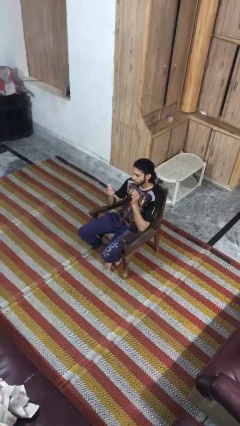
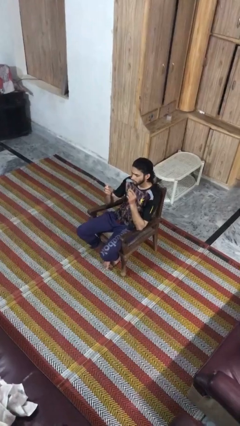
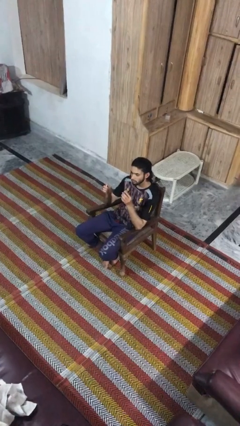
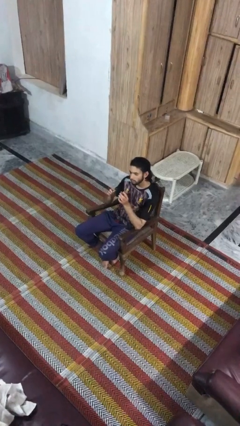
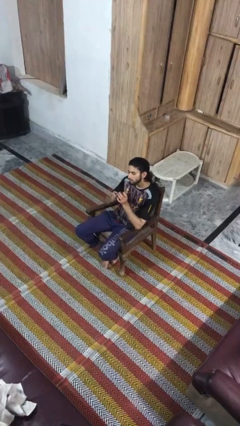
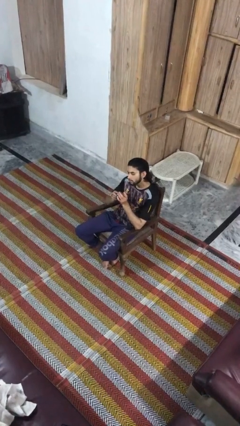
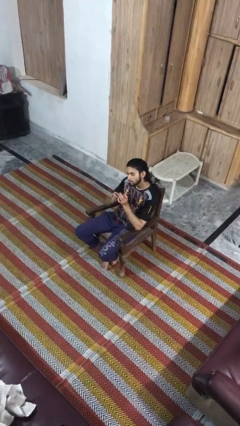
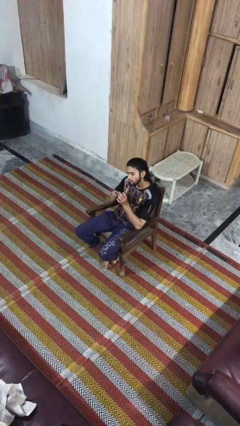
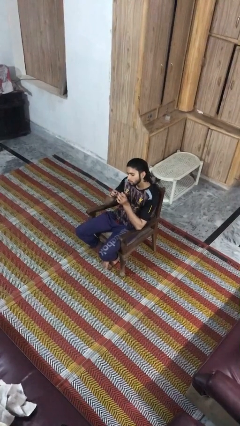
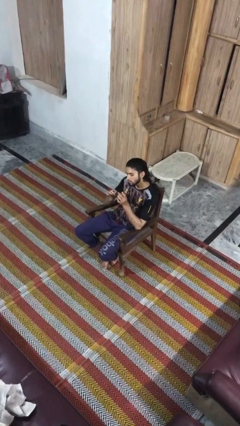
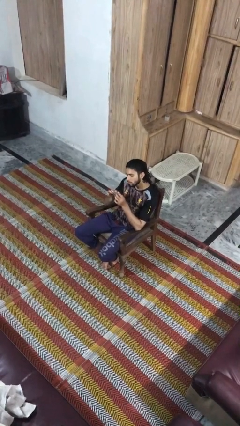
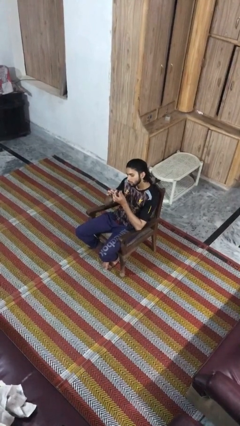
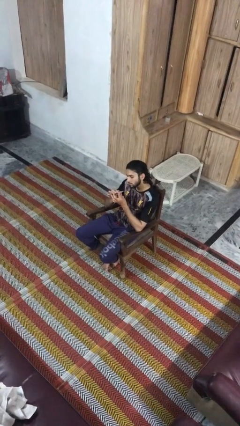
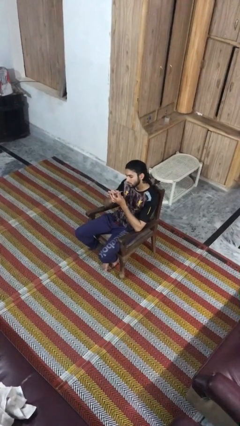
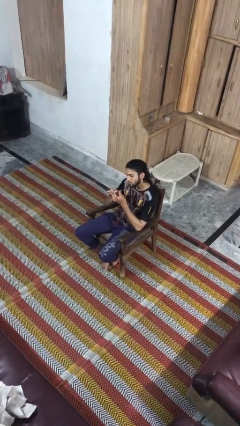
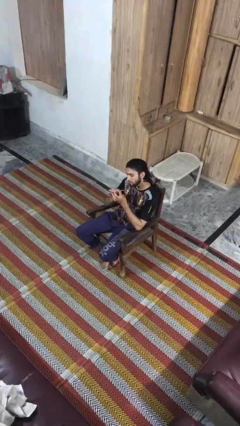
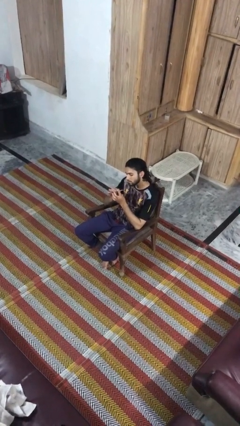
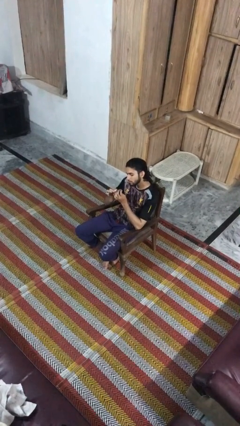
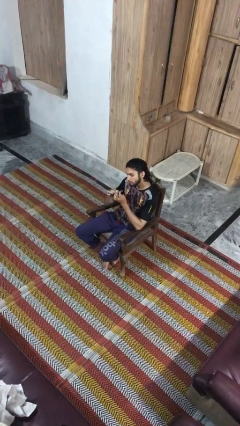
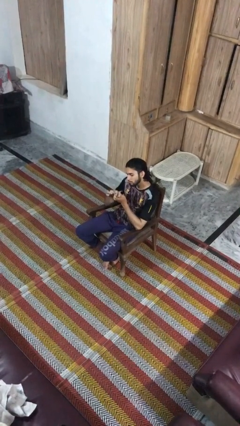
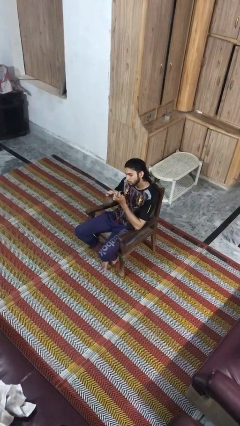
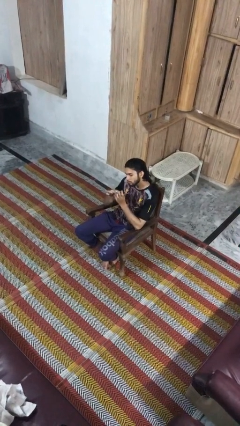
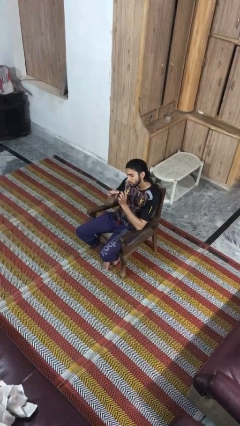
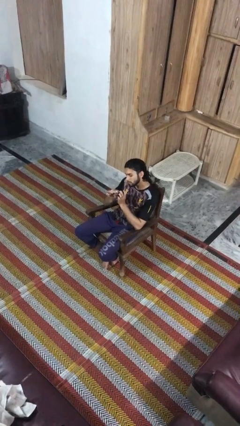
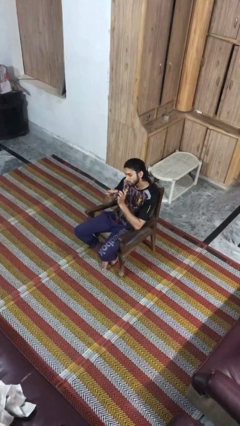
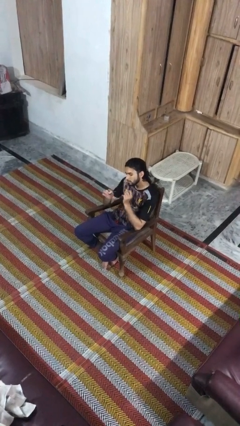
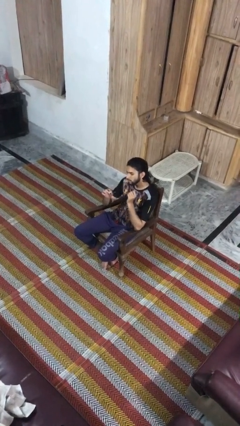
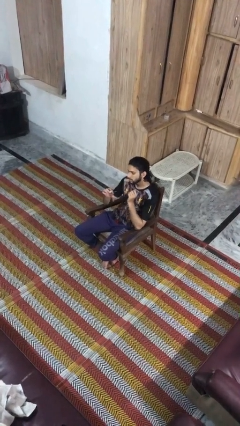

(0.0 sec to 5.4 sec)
person files fingernails

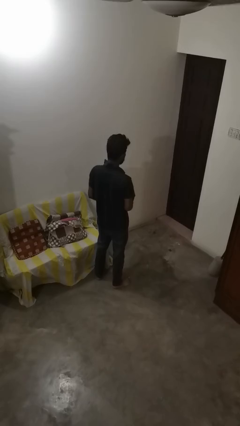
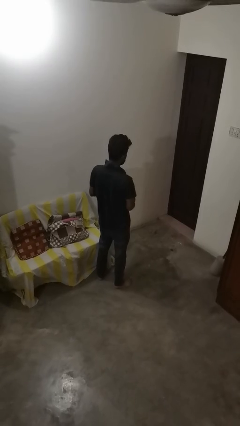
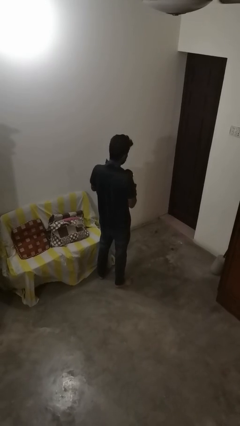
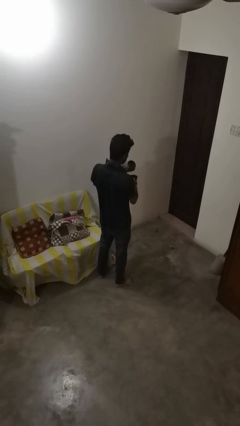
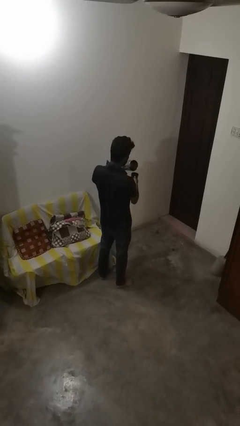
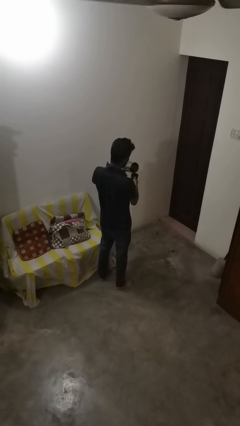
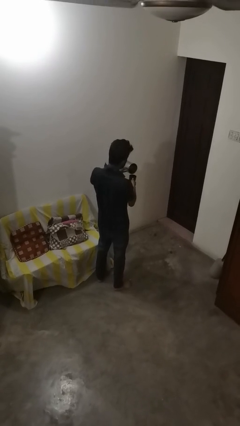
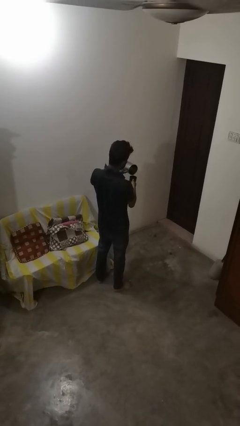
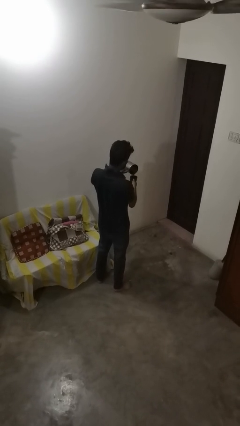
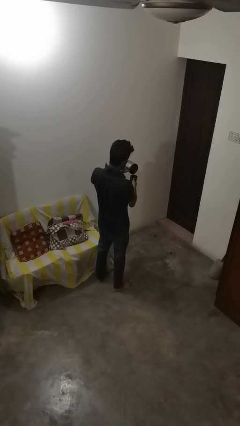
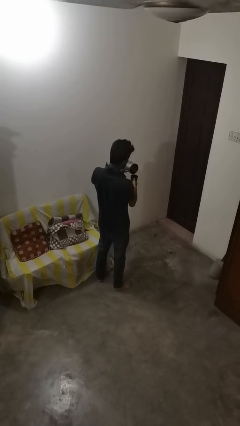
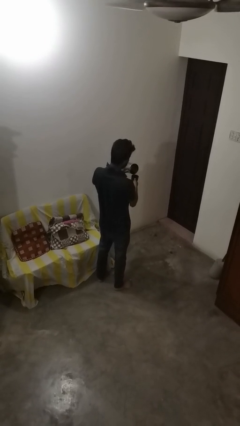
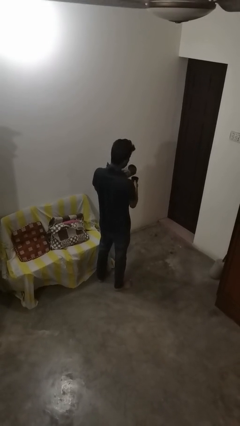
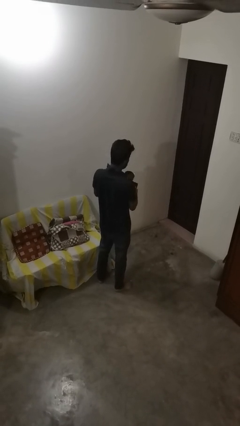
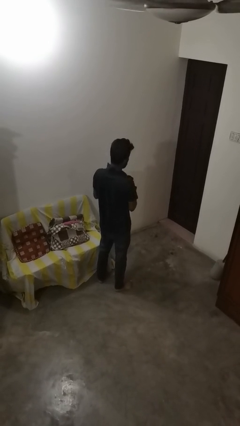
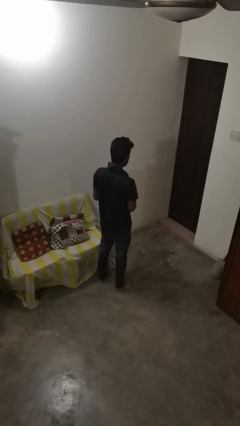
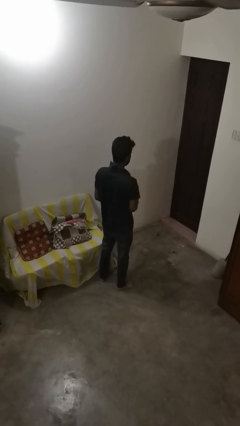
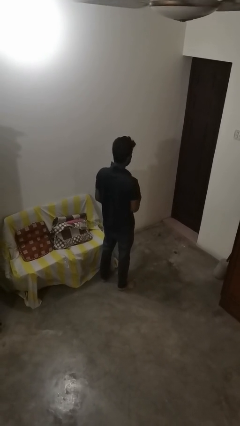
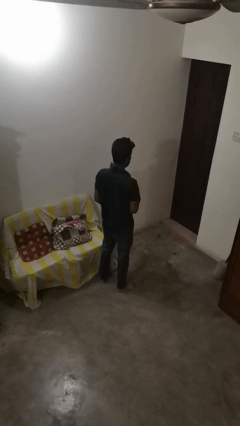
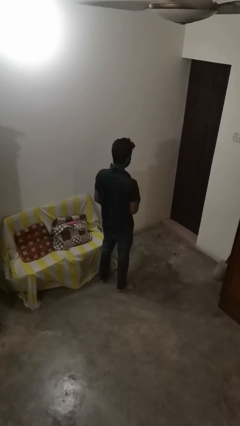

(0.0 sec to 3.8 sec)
person pours coffee into mug

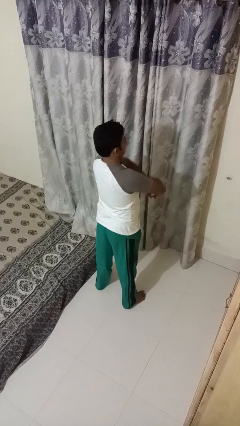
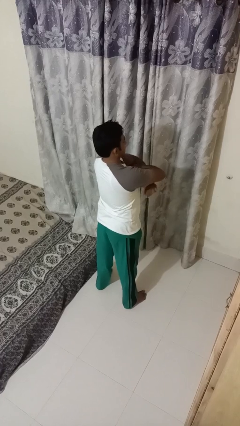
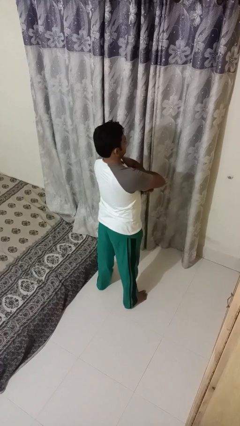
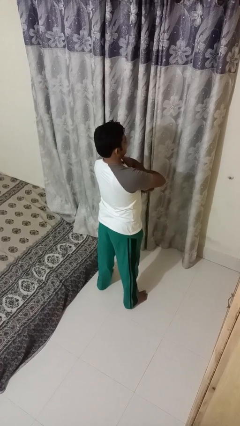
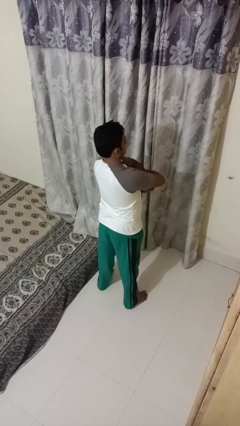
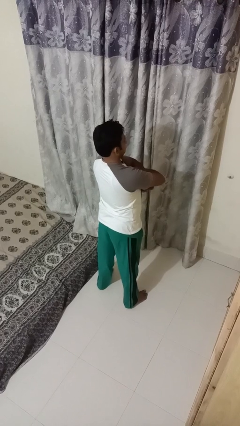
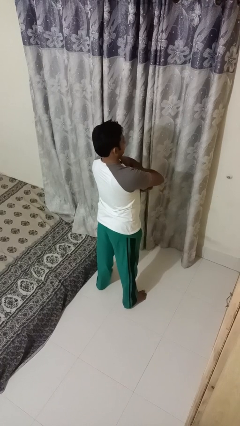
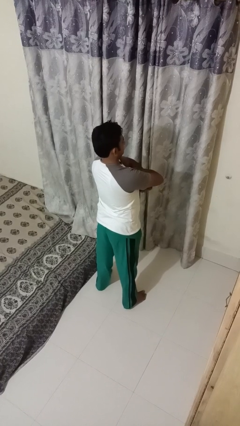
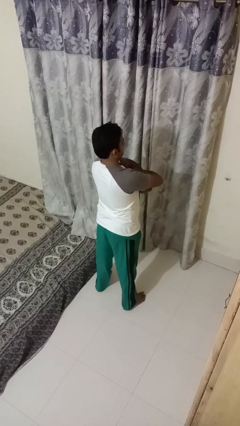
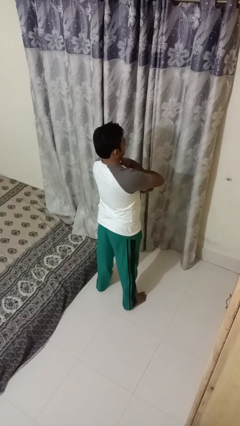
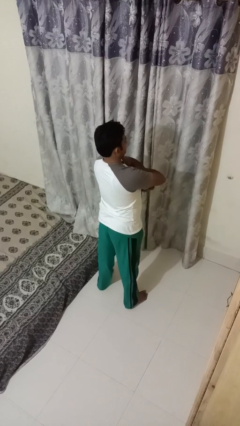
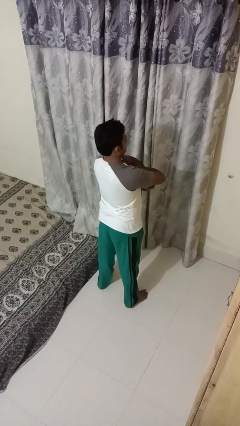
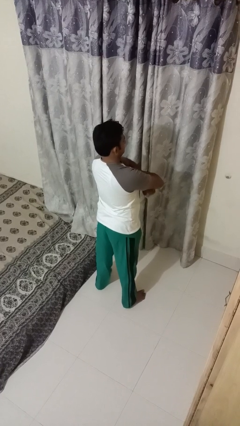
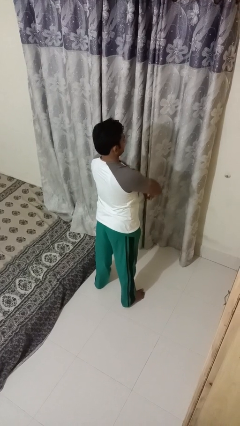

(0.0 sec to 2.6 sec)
person gestures arms x

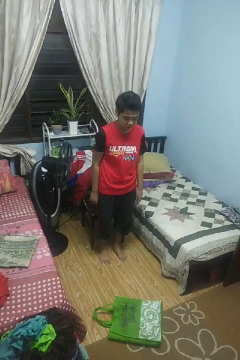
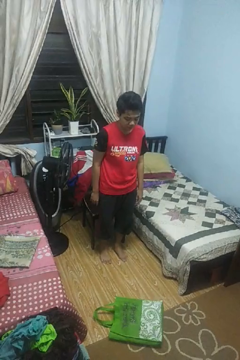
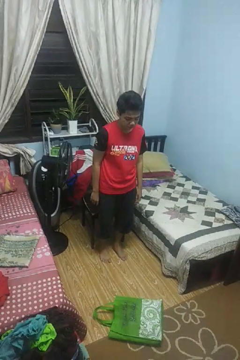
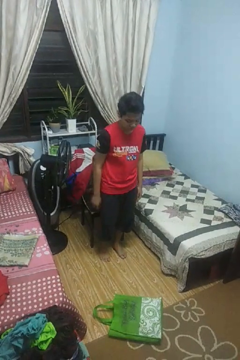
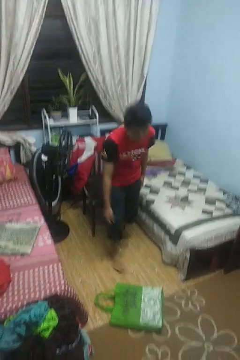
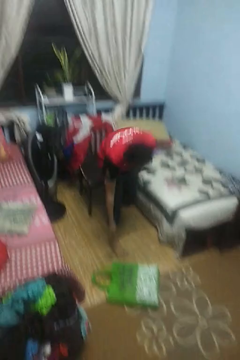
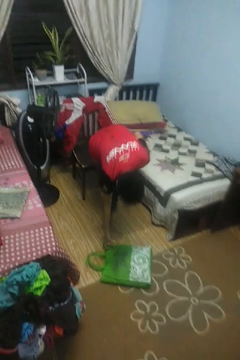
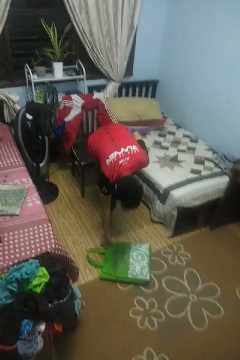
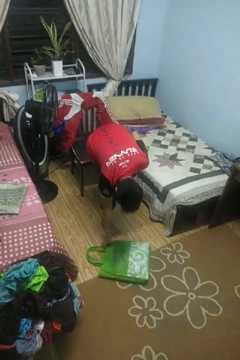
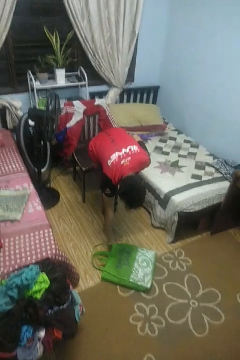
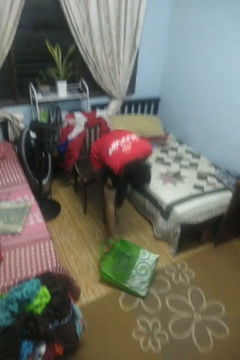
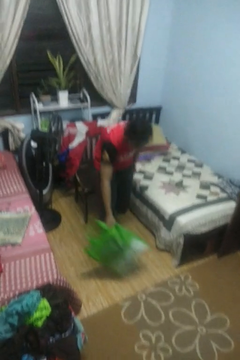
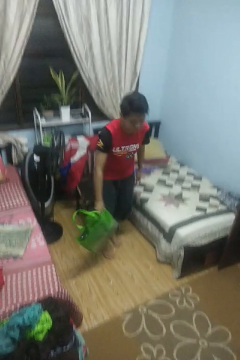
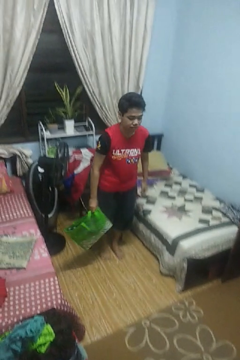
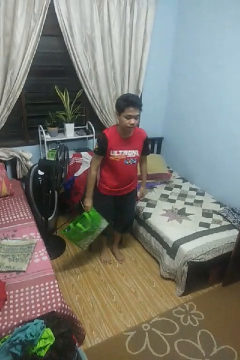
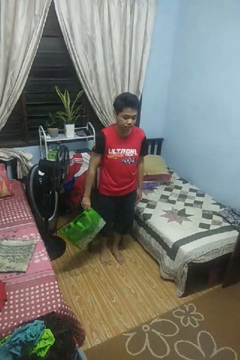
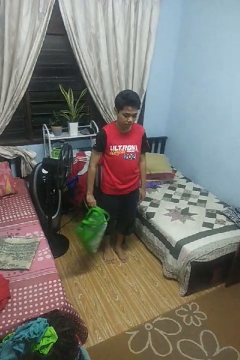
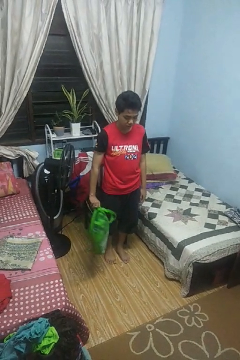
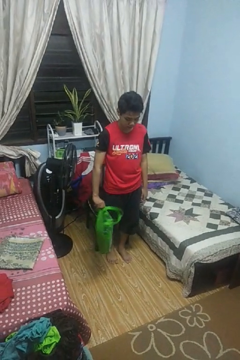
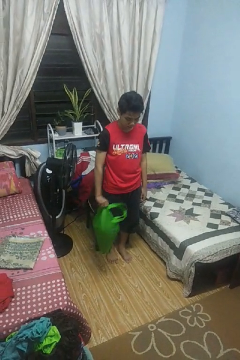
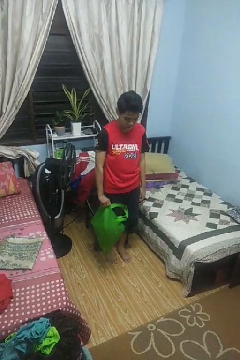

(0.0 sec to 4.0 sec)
person picks up object from floor

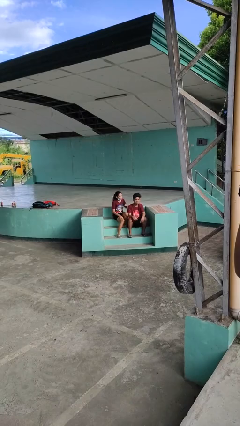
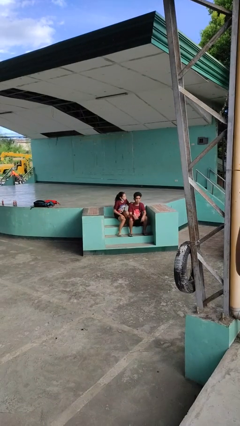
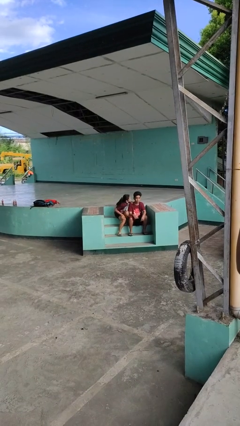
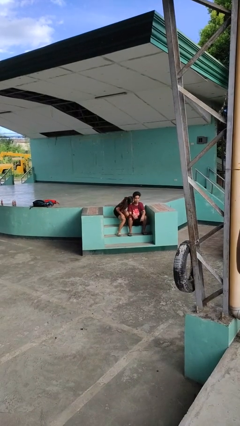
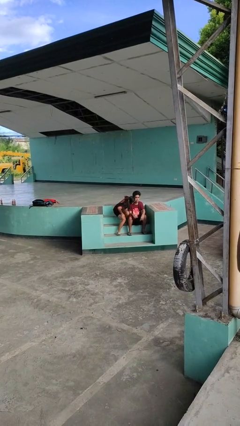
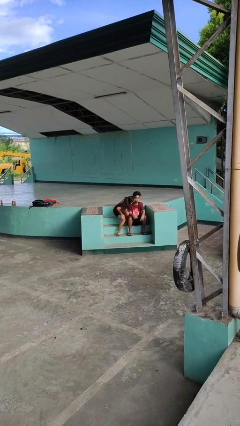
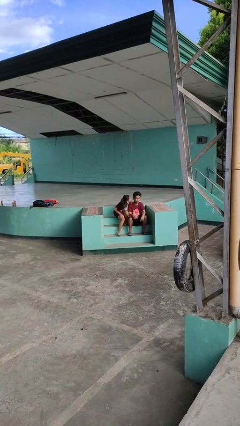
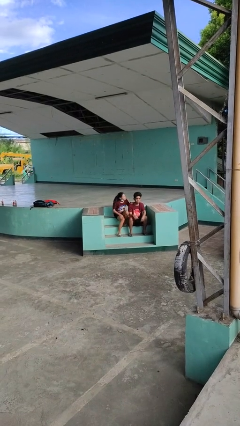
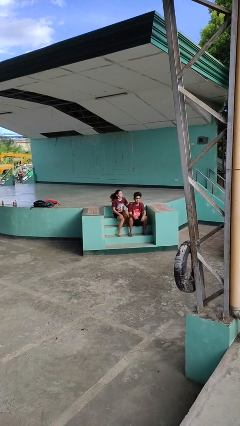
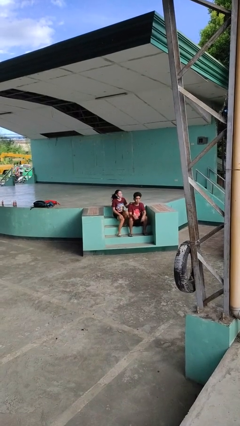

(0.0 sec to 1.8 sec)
person kisses cheek of person

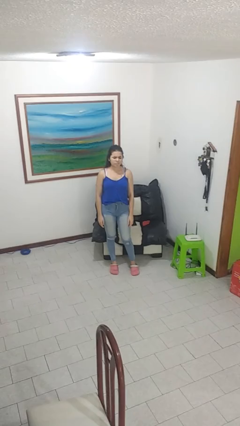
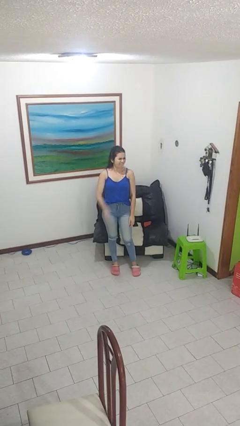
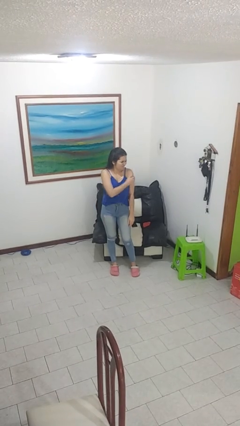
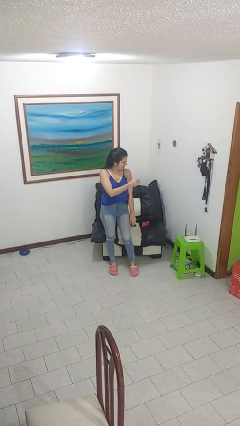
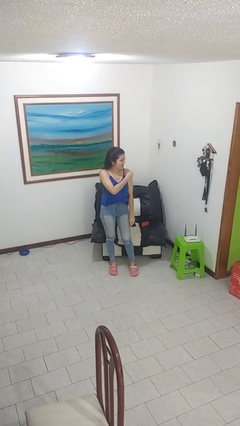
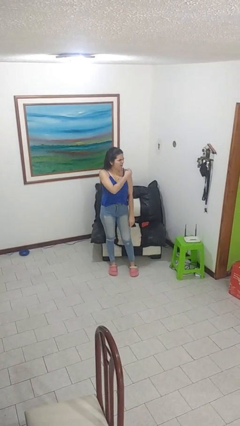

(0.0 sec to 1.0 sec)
person swats bug
